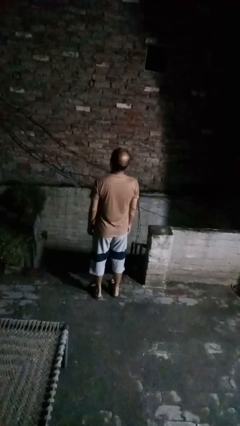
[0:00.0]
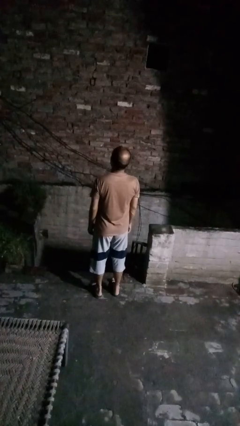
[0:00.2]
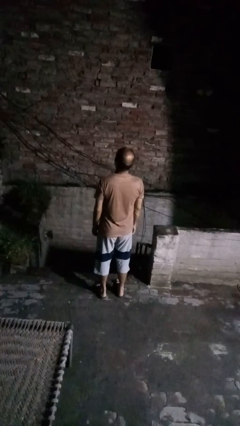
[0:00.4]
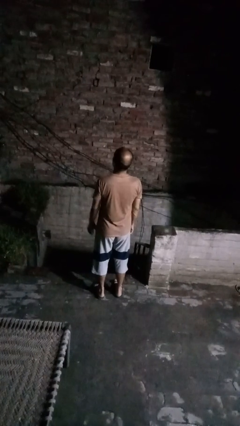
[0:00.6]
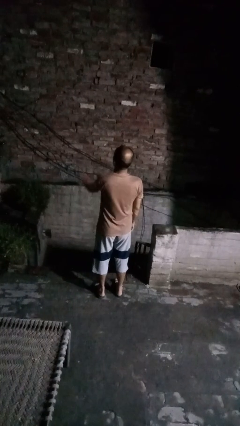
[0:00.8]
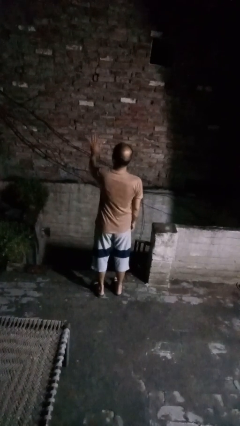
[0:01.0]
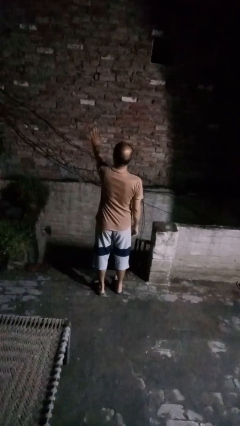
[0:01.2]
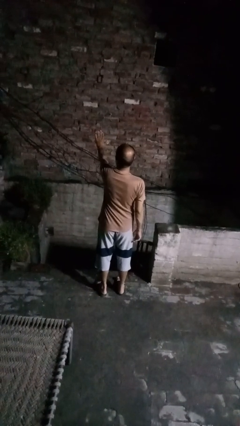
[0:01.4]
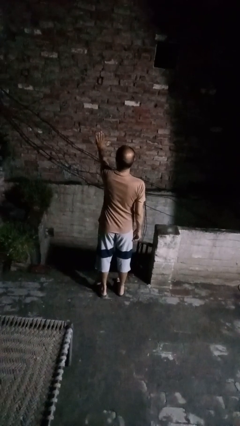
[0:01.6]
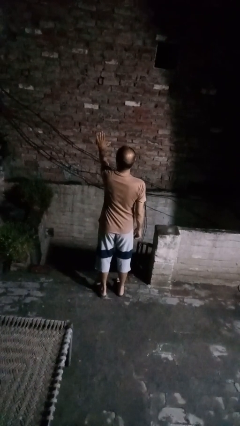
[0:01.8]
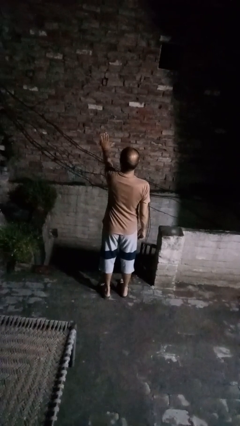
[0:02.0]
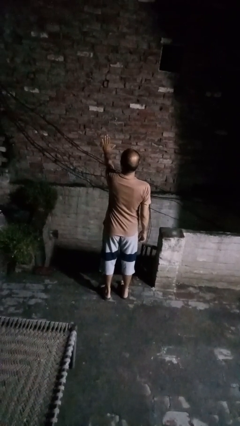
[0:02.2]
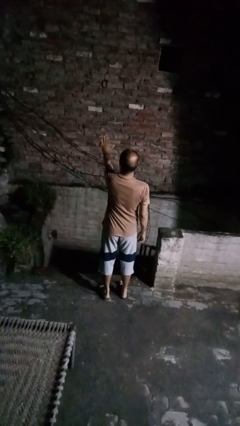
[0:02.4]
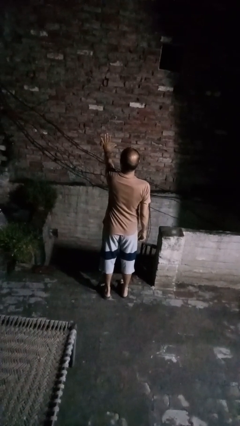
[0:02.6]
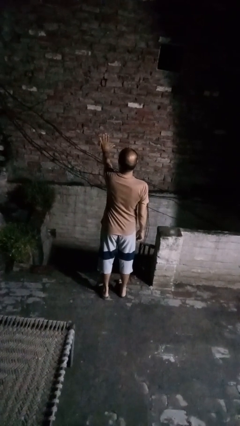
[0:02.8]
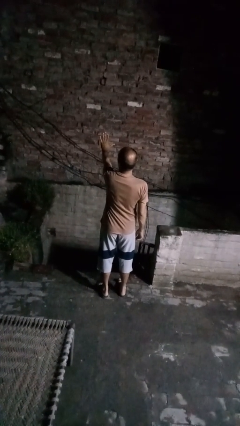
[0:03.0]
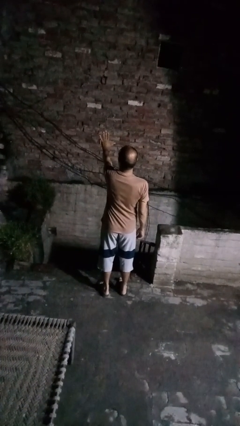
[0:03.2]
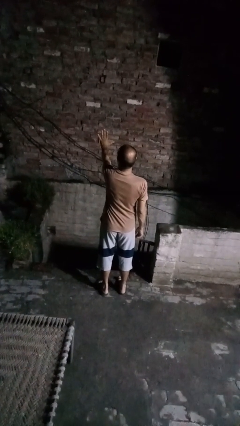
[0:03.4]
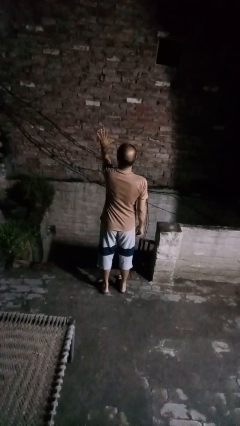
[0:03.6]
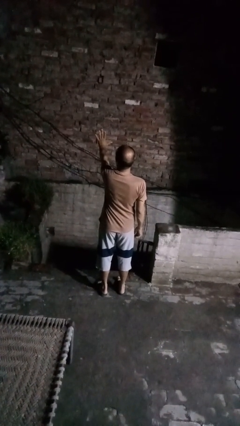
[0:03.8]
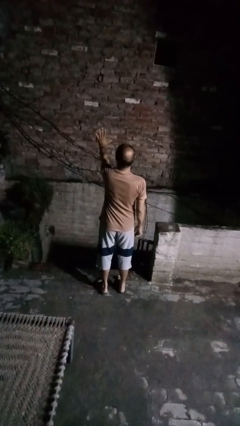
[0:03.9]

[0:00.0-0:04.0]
person gestures stop

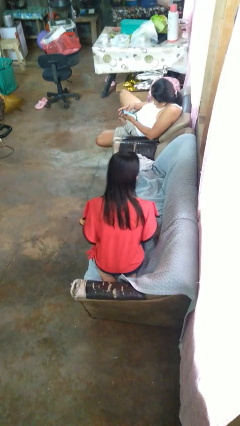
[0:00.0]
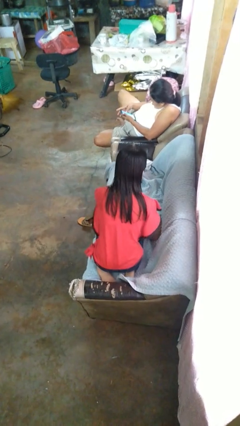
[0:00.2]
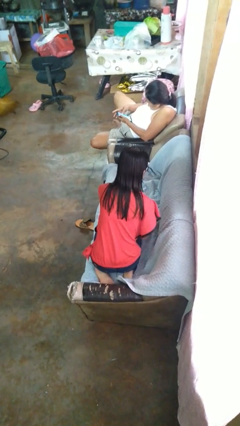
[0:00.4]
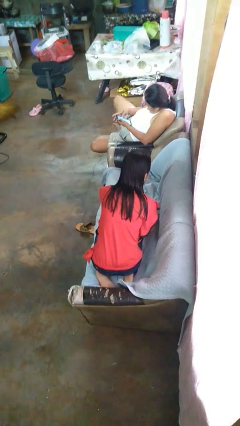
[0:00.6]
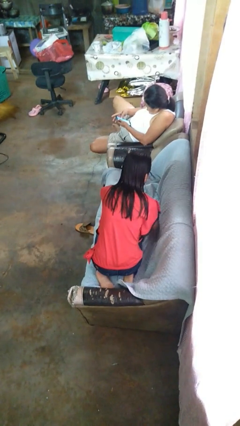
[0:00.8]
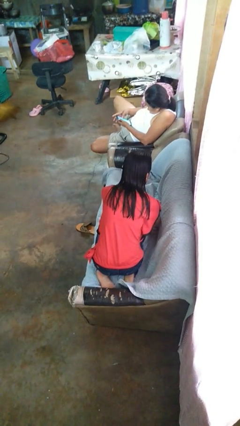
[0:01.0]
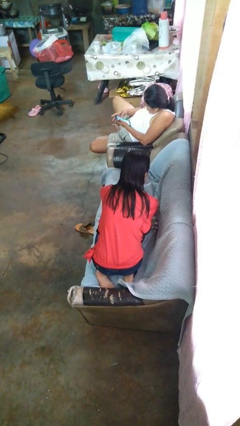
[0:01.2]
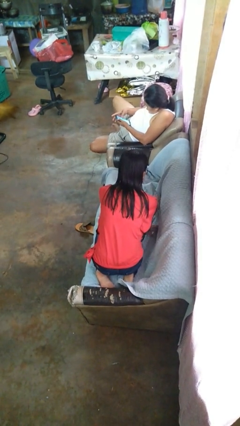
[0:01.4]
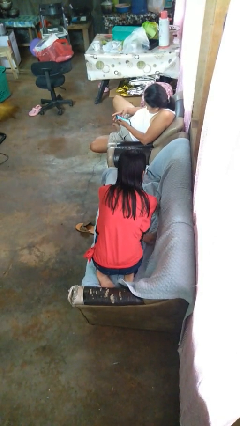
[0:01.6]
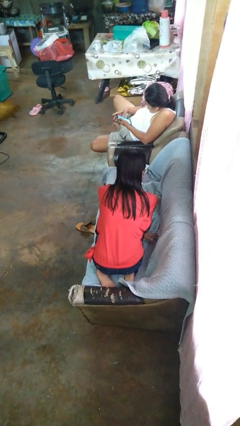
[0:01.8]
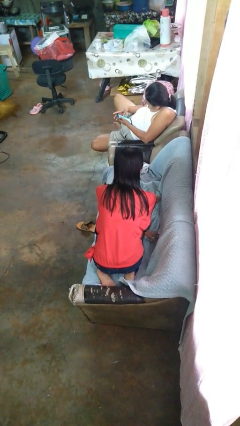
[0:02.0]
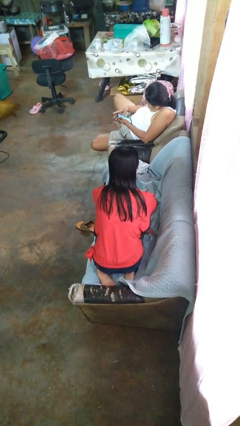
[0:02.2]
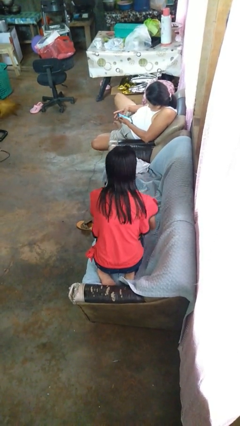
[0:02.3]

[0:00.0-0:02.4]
person searches in couch

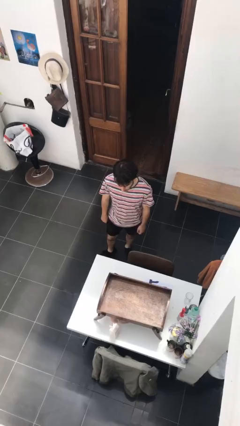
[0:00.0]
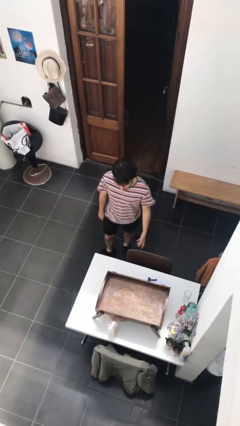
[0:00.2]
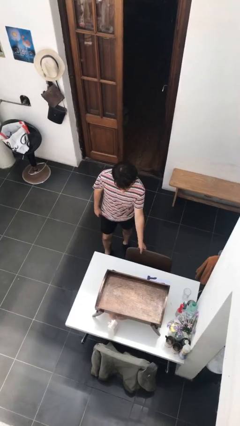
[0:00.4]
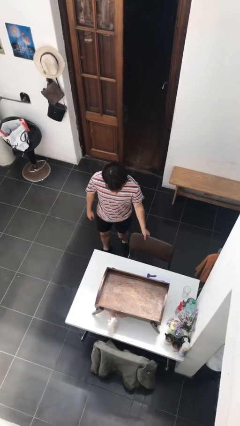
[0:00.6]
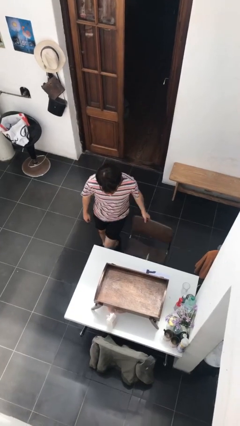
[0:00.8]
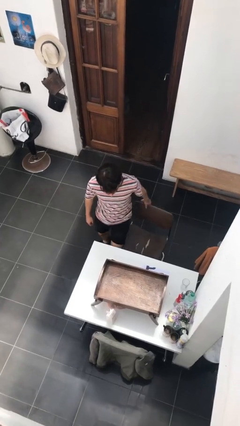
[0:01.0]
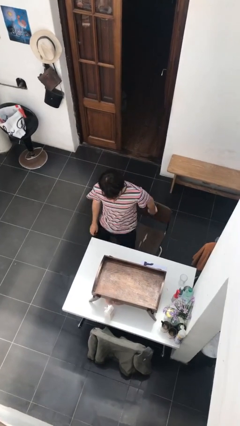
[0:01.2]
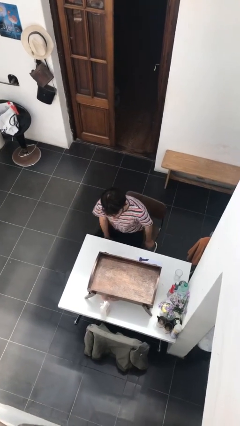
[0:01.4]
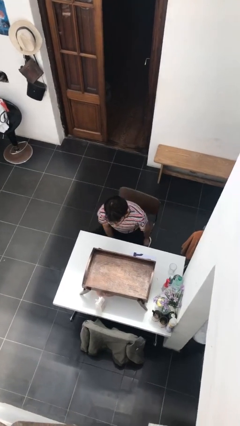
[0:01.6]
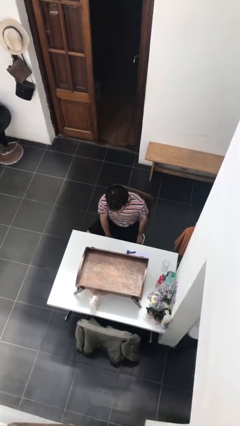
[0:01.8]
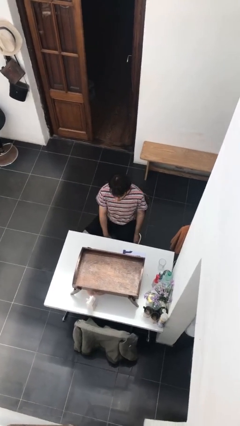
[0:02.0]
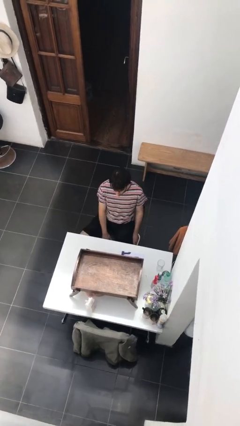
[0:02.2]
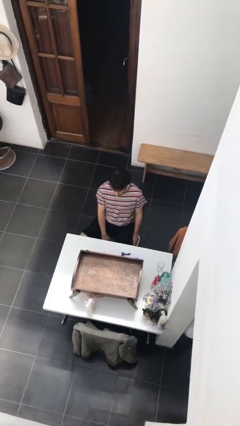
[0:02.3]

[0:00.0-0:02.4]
person sits down

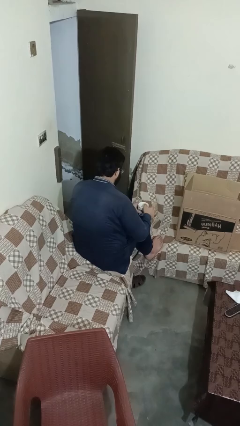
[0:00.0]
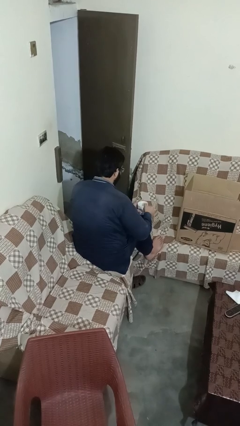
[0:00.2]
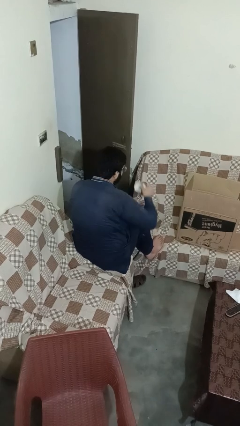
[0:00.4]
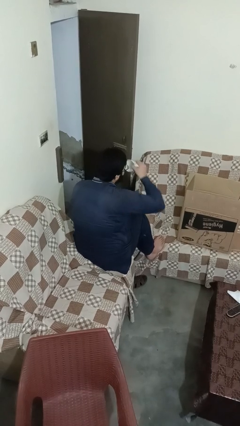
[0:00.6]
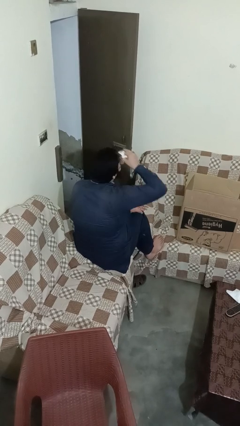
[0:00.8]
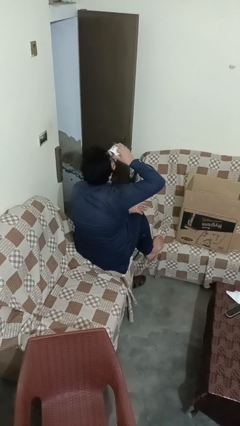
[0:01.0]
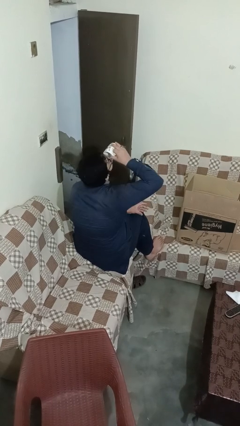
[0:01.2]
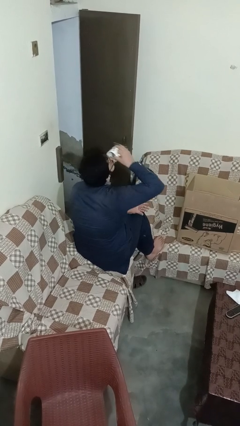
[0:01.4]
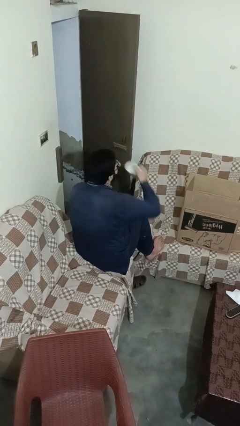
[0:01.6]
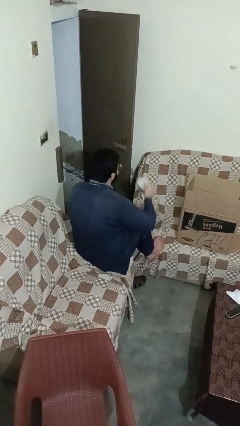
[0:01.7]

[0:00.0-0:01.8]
person drinks from mug

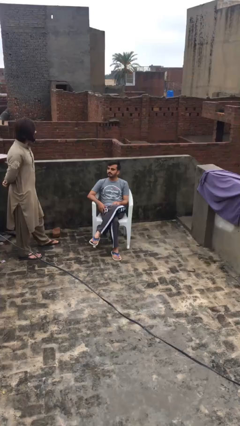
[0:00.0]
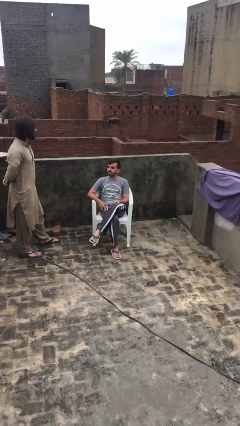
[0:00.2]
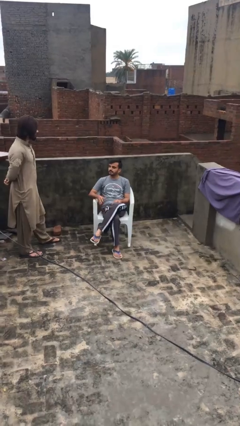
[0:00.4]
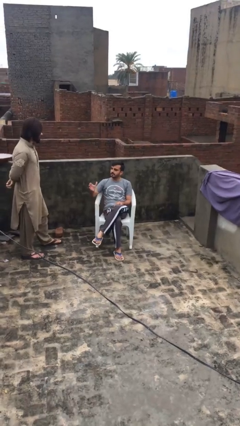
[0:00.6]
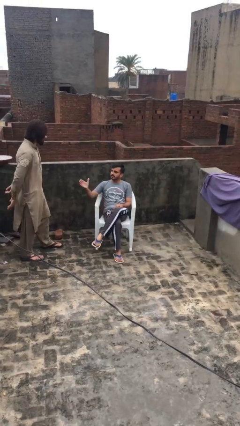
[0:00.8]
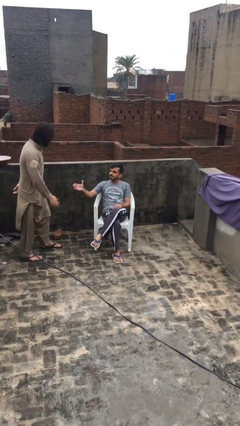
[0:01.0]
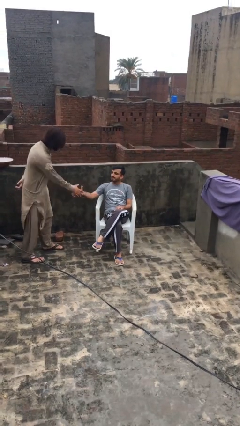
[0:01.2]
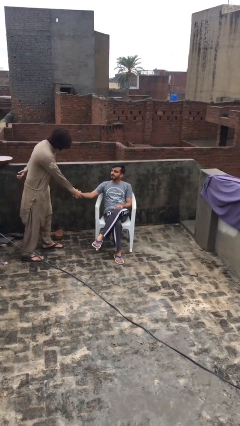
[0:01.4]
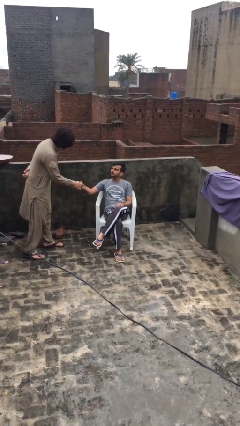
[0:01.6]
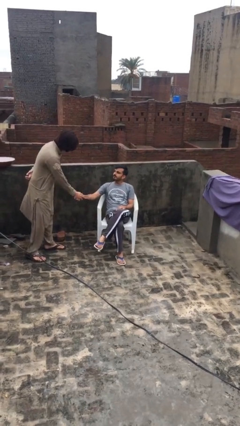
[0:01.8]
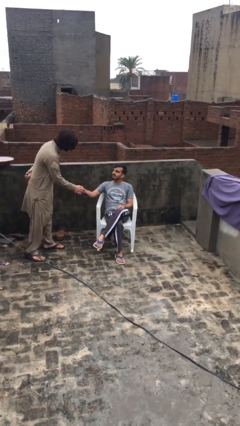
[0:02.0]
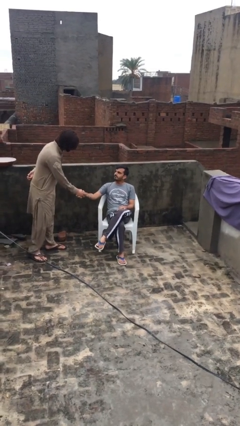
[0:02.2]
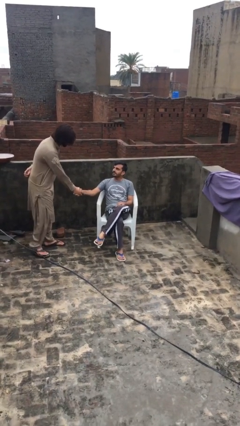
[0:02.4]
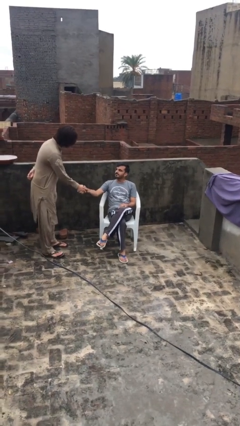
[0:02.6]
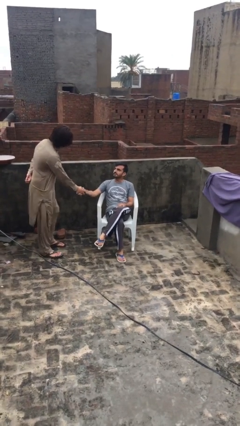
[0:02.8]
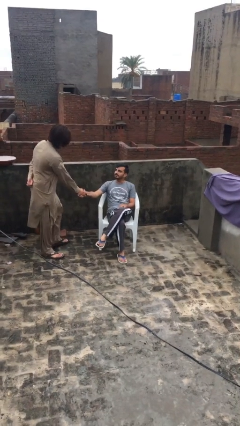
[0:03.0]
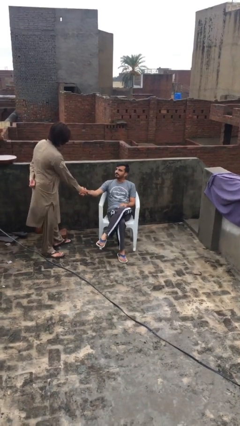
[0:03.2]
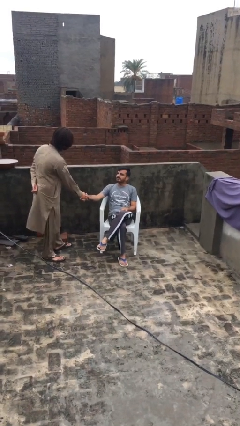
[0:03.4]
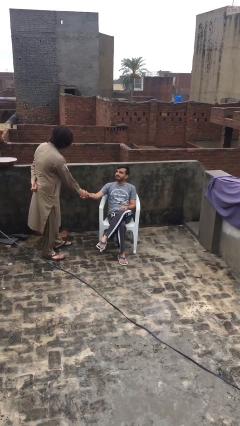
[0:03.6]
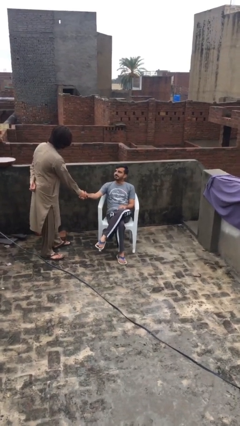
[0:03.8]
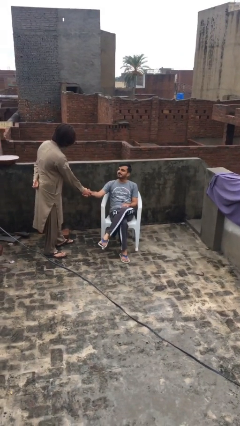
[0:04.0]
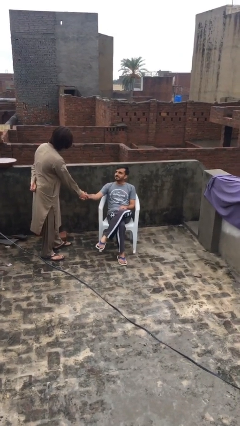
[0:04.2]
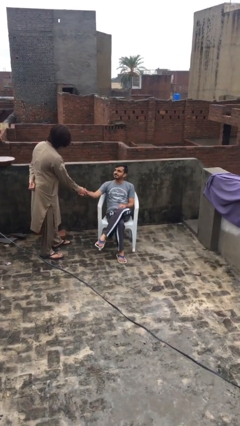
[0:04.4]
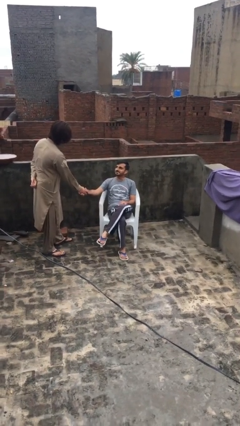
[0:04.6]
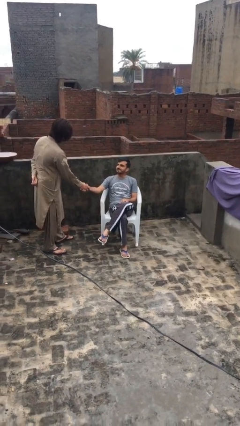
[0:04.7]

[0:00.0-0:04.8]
person shakes hand

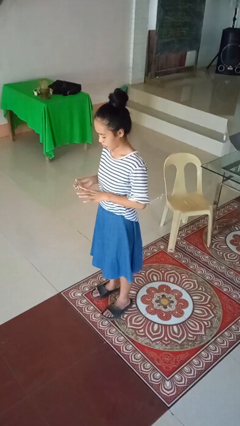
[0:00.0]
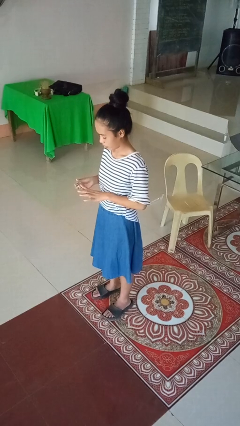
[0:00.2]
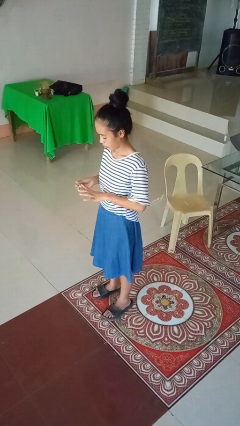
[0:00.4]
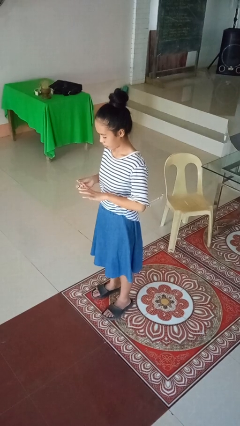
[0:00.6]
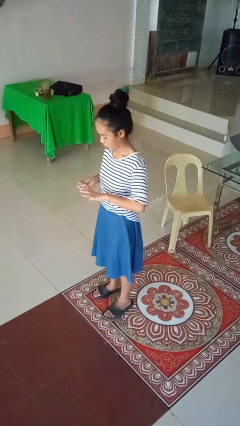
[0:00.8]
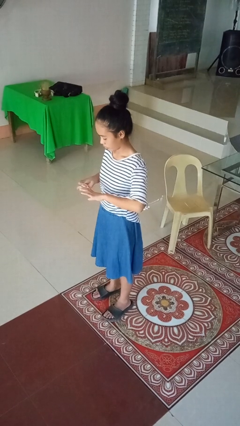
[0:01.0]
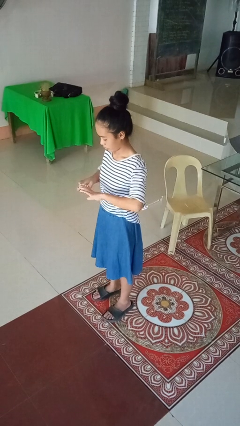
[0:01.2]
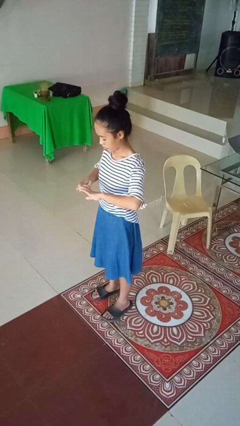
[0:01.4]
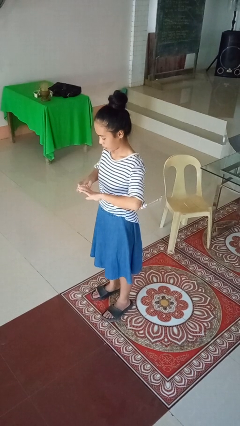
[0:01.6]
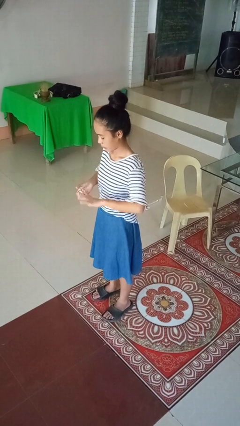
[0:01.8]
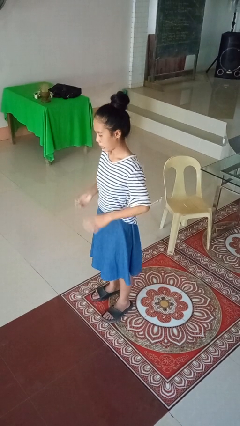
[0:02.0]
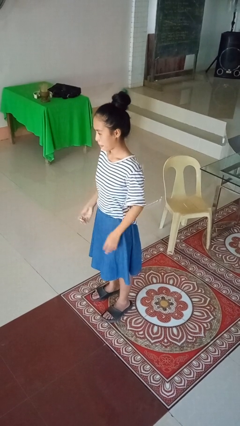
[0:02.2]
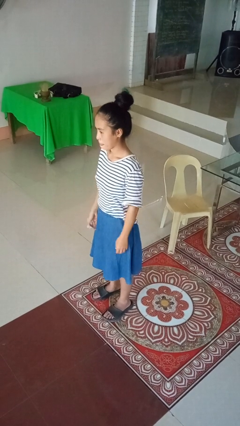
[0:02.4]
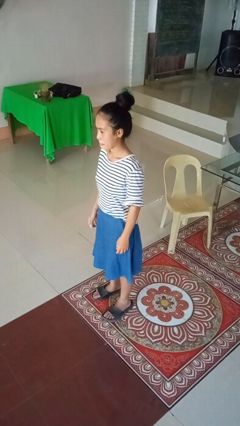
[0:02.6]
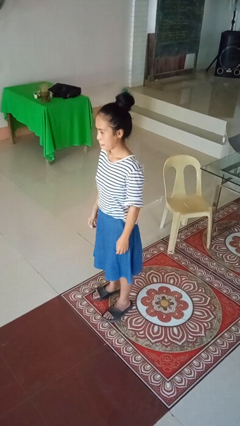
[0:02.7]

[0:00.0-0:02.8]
person clips fingernails
